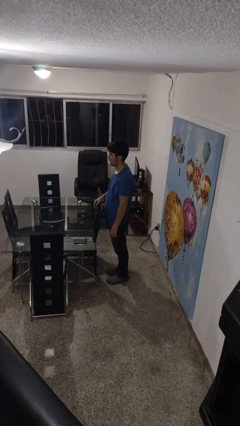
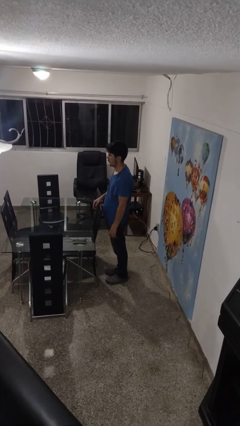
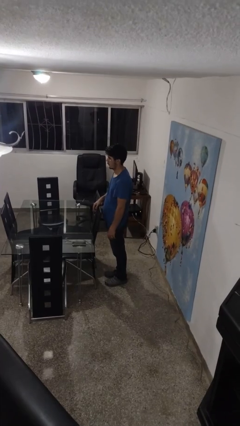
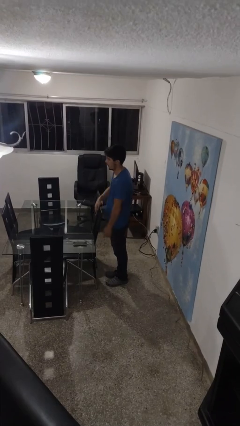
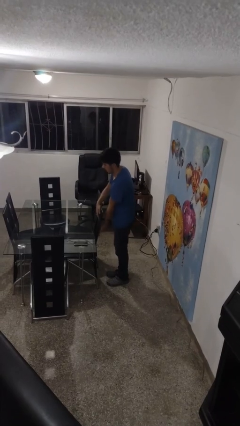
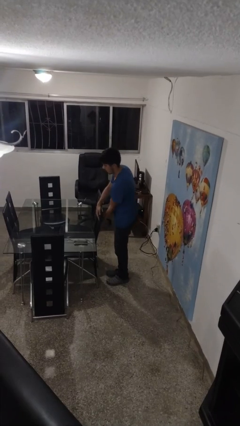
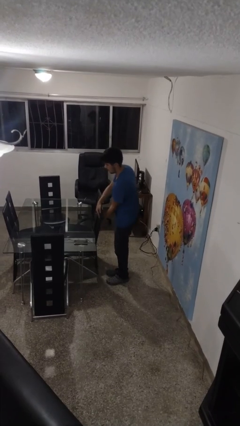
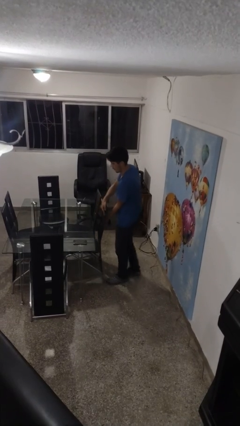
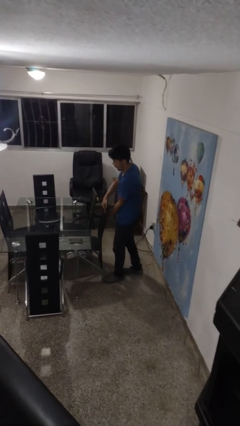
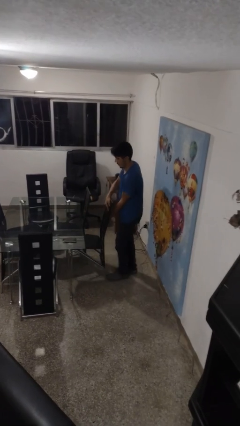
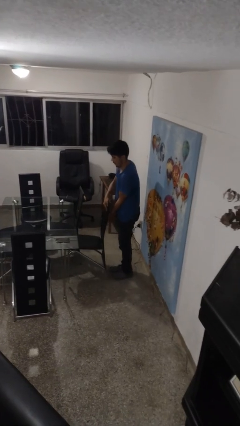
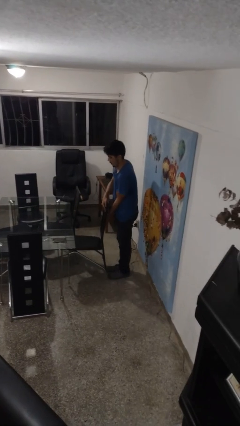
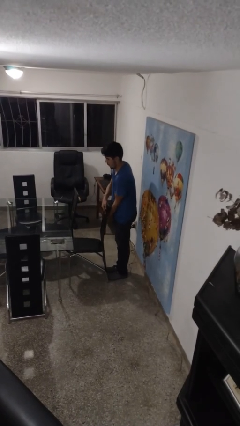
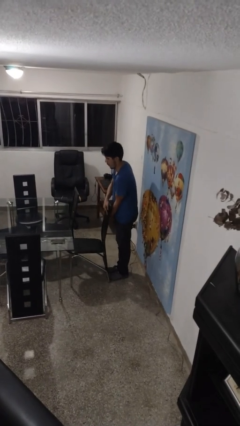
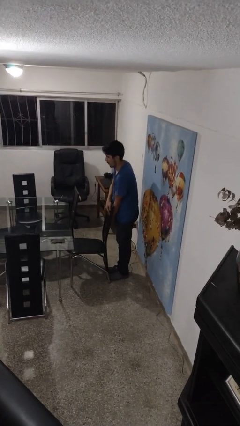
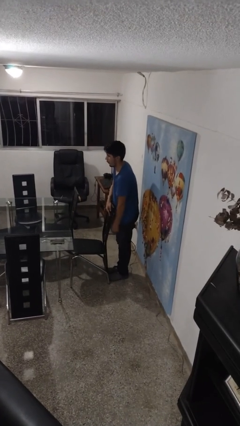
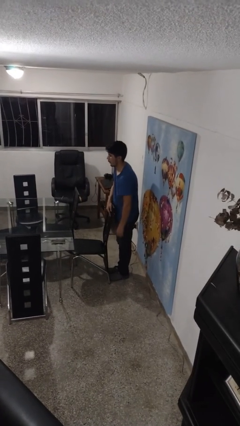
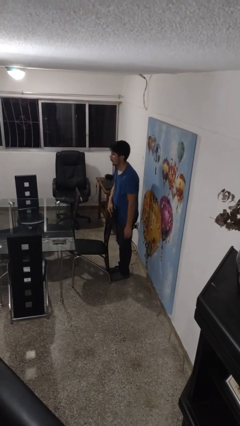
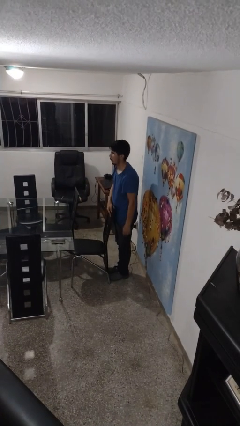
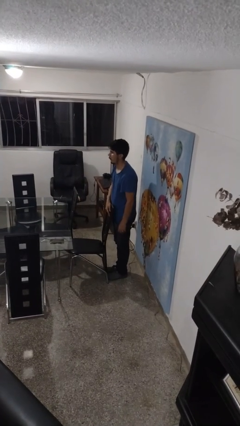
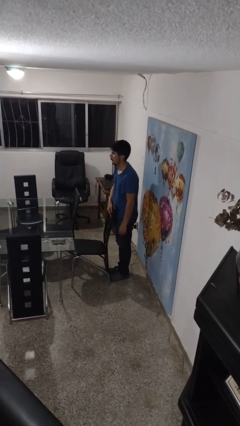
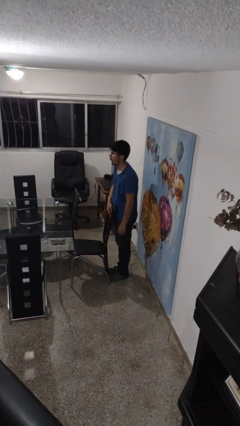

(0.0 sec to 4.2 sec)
person pulls out chair

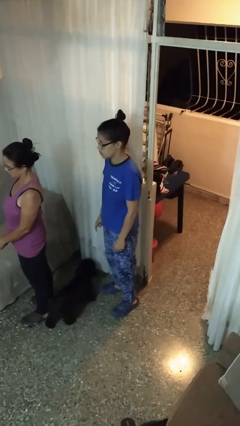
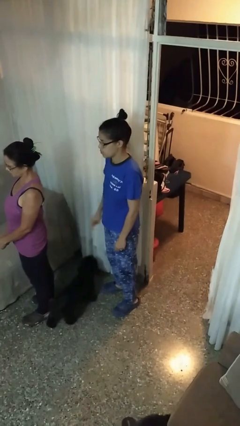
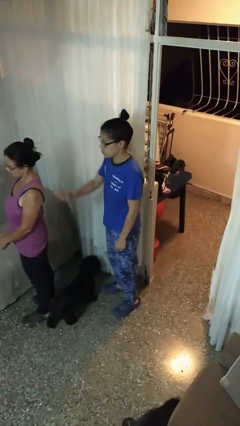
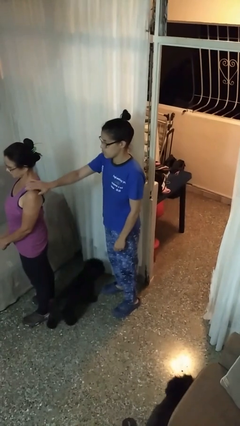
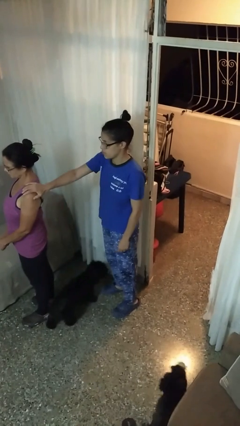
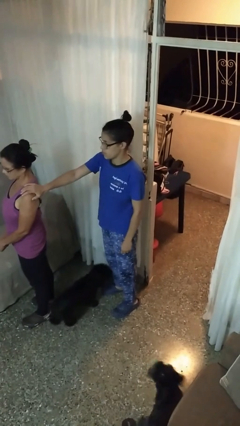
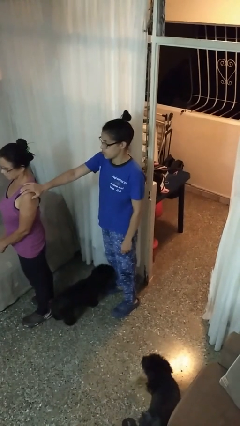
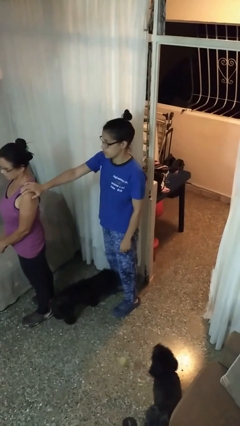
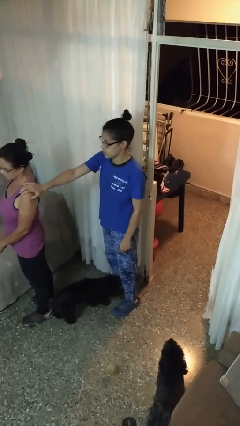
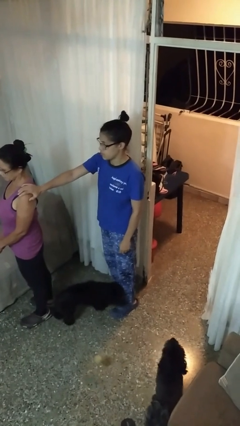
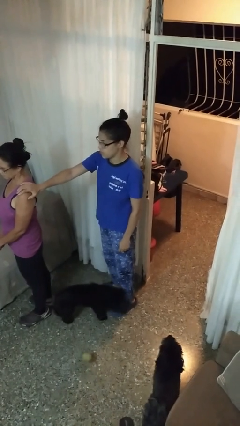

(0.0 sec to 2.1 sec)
person grabs person by shoulder

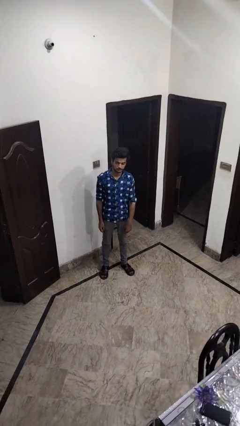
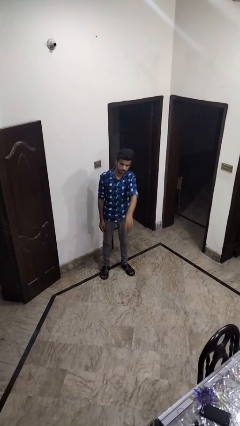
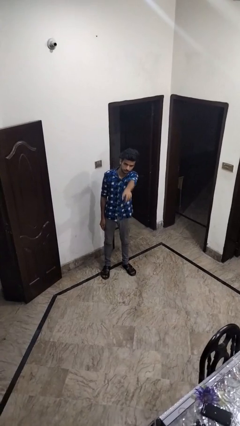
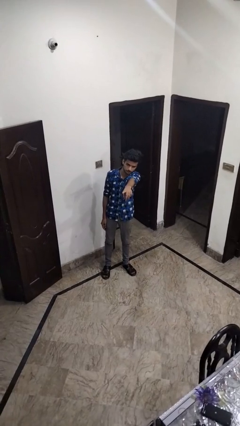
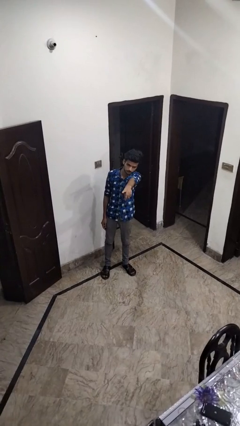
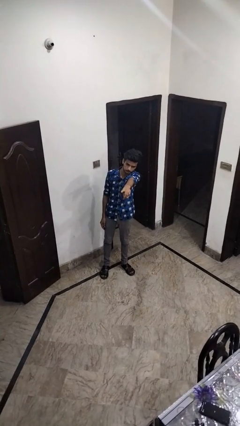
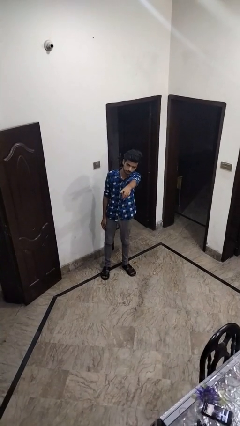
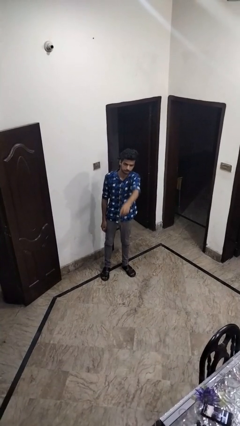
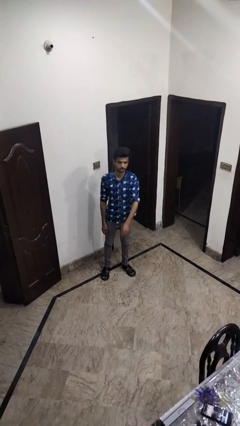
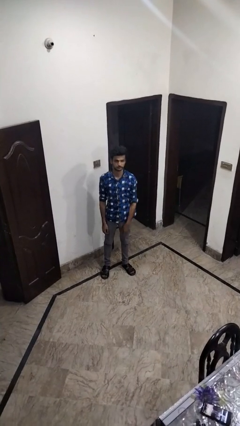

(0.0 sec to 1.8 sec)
person points at person

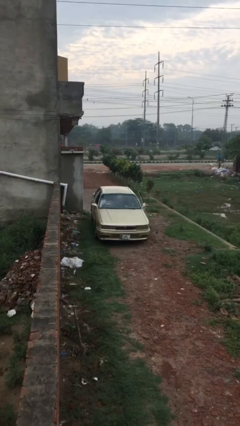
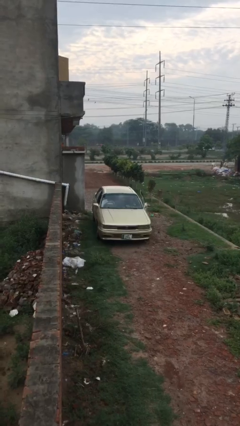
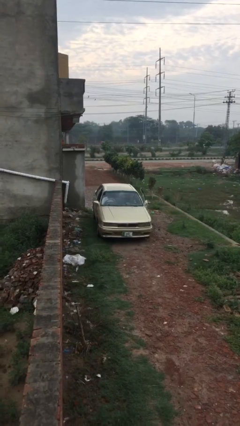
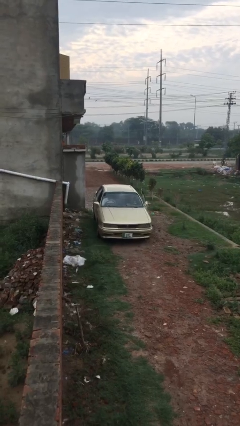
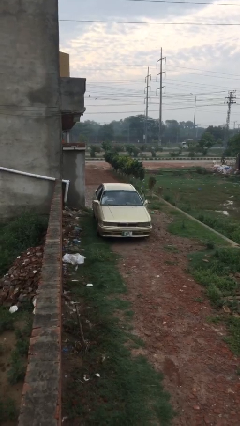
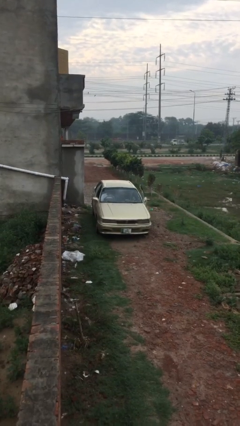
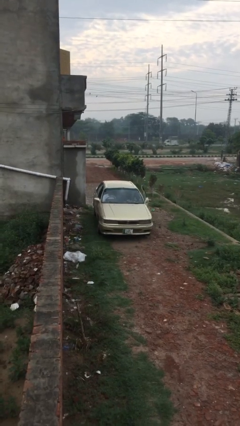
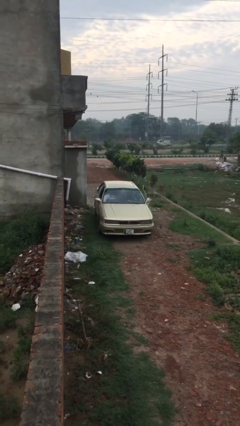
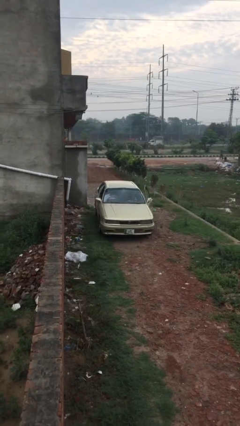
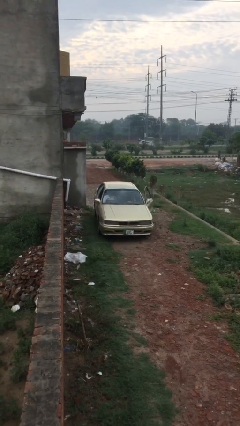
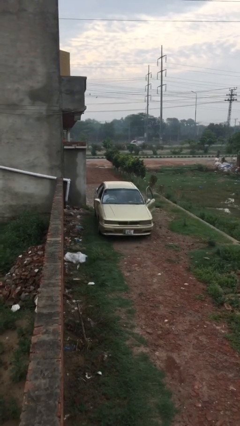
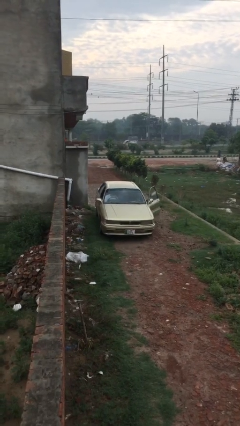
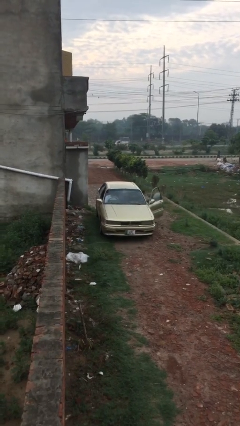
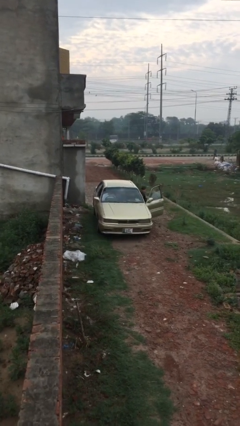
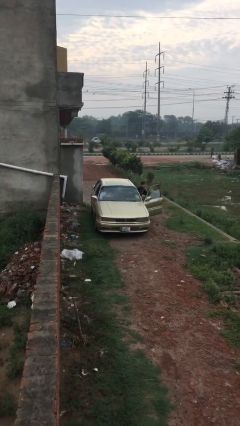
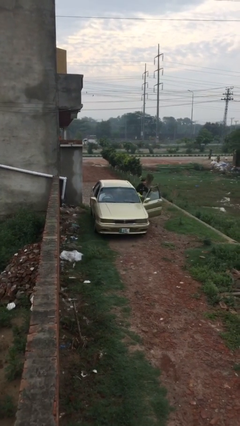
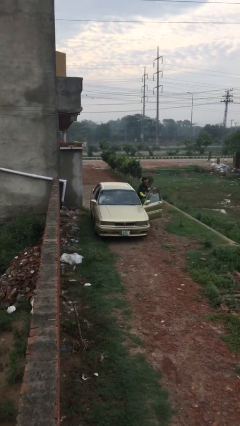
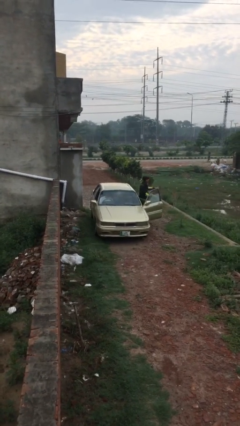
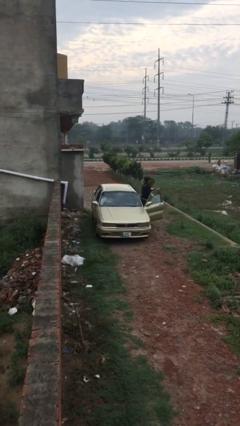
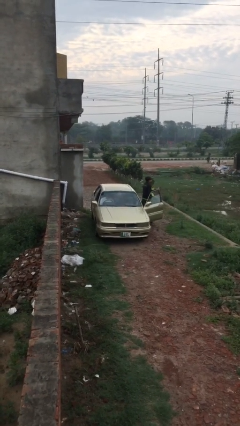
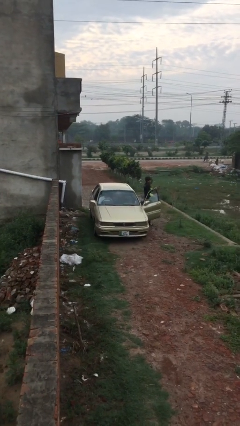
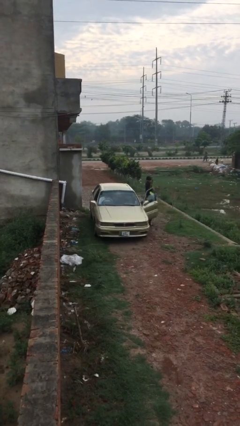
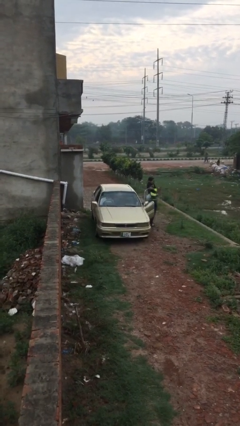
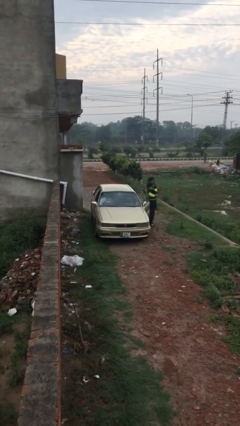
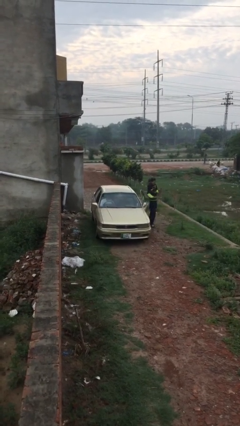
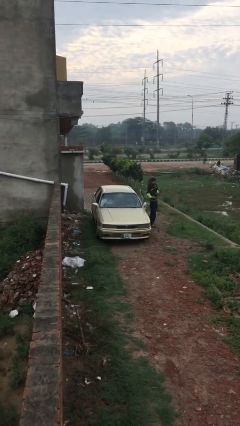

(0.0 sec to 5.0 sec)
car drops off person

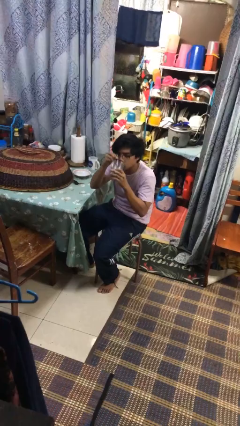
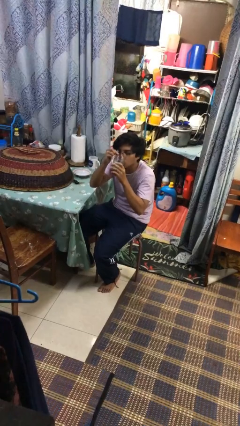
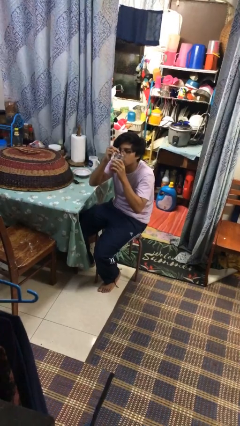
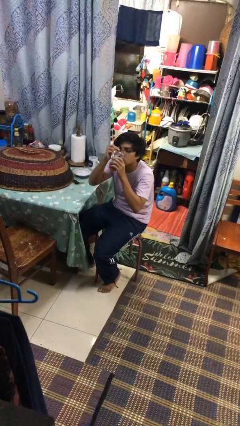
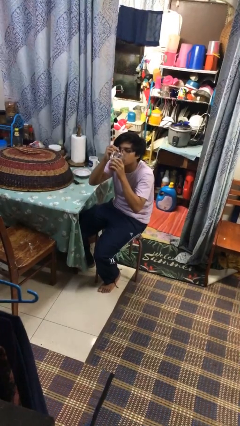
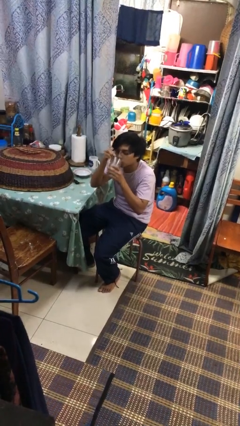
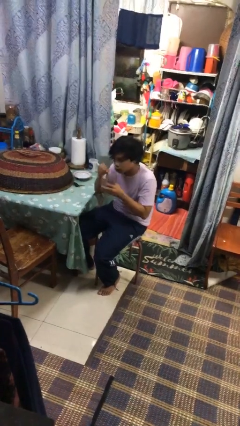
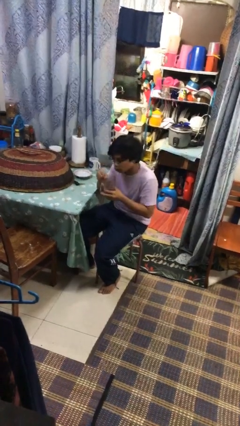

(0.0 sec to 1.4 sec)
person drinks from mug

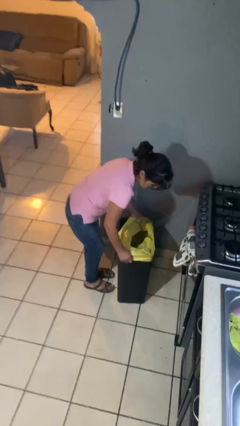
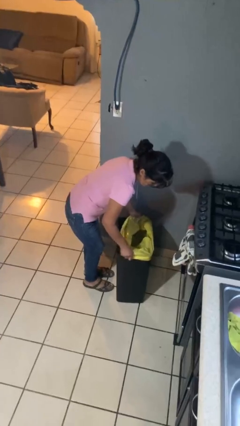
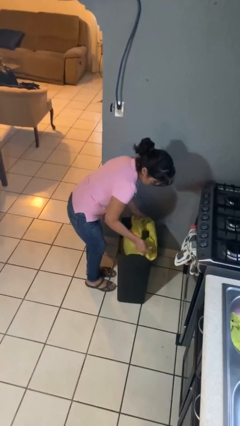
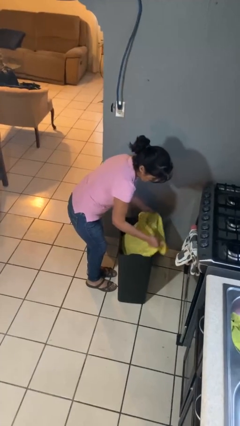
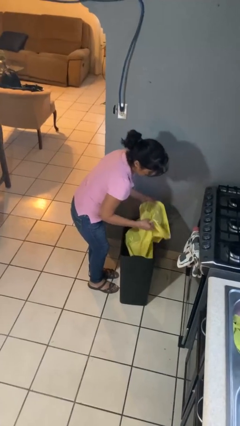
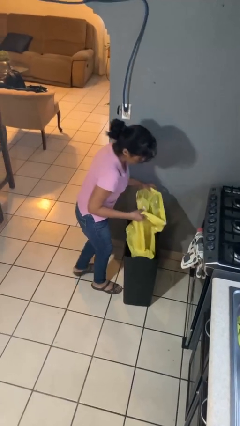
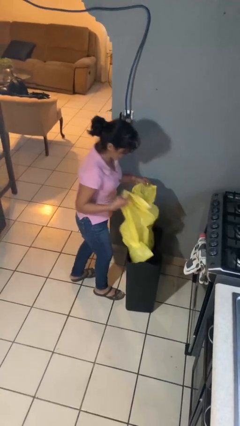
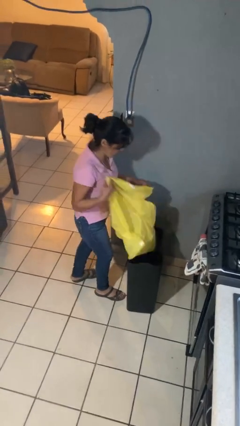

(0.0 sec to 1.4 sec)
person removes trashbag from trashcan

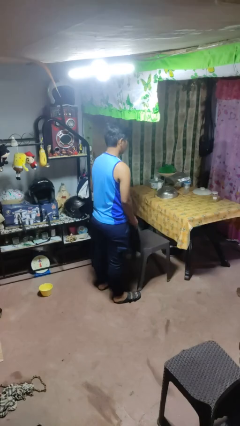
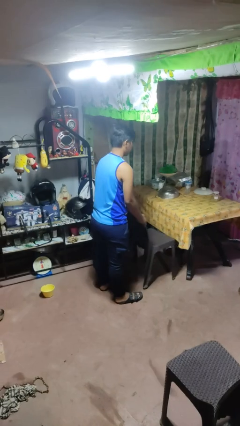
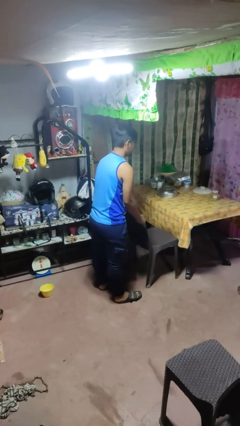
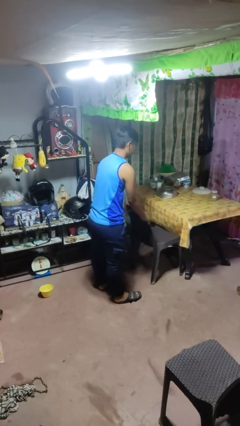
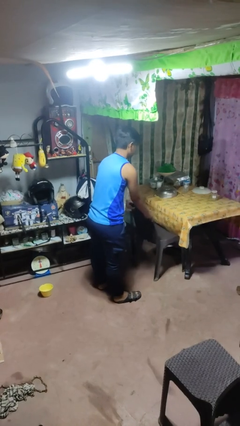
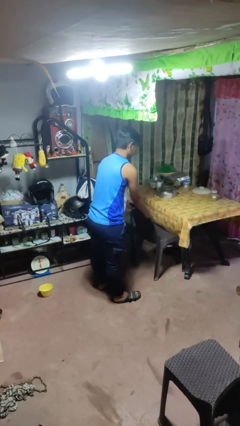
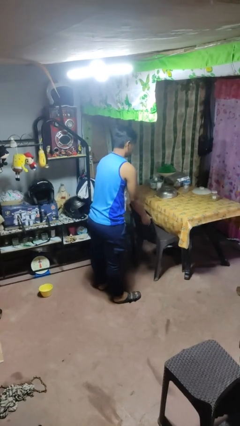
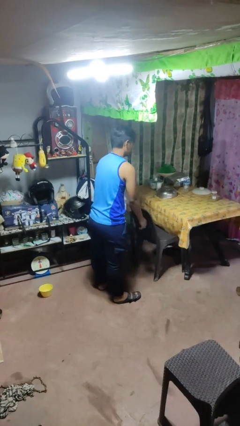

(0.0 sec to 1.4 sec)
person pushes in chair
